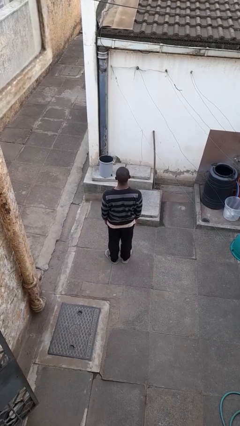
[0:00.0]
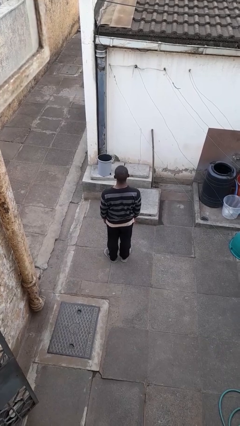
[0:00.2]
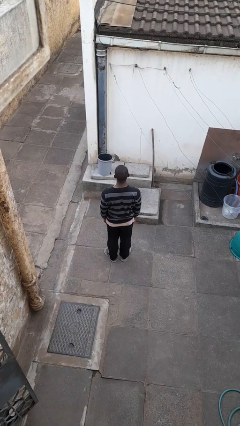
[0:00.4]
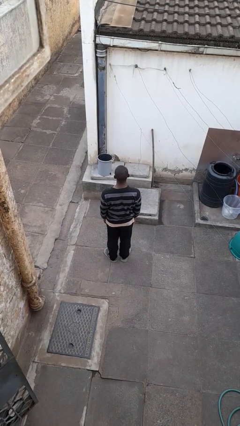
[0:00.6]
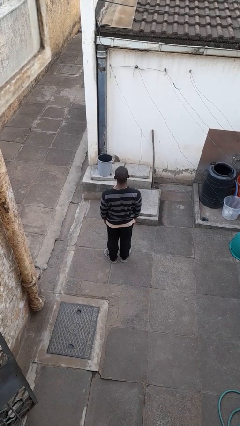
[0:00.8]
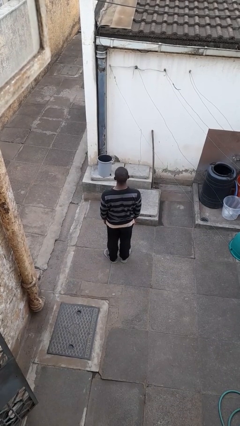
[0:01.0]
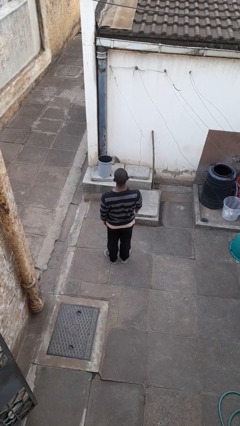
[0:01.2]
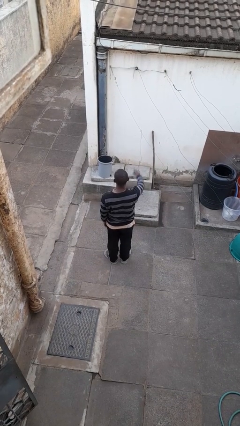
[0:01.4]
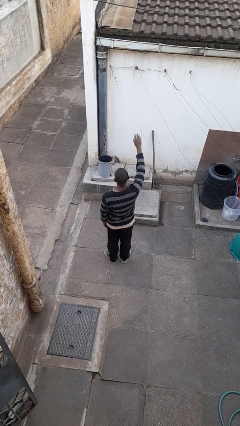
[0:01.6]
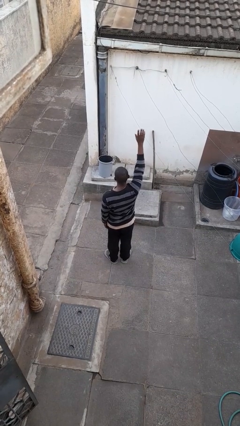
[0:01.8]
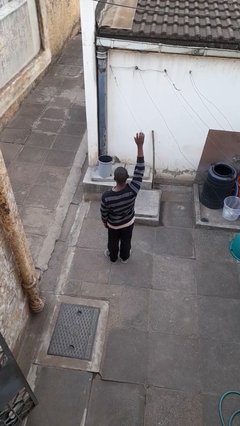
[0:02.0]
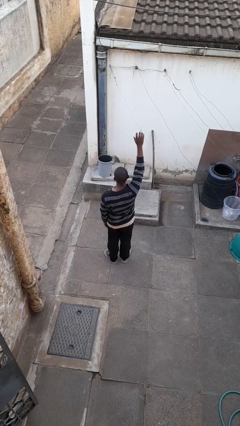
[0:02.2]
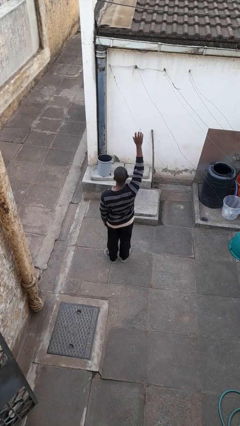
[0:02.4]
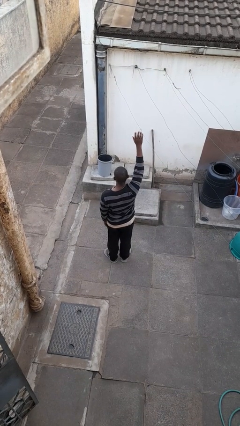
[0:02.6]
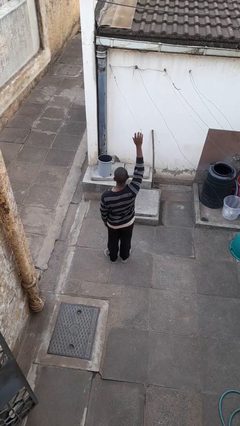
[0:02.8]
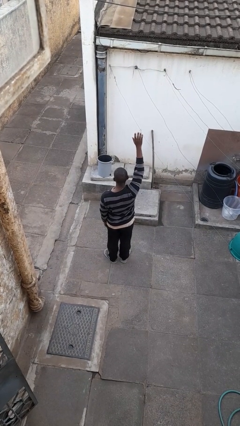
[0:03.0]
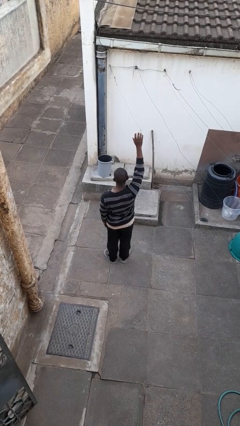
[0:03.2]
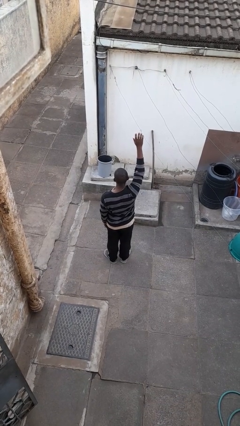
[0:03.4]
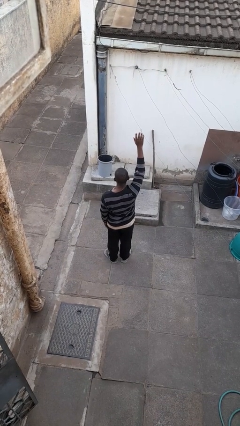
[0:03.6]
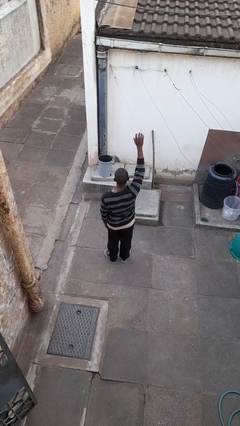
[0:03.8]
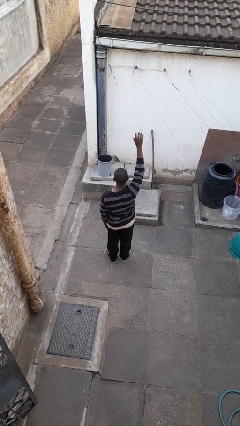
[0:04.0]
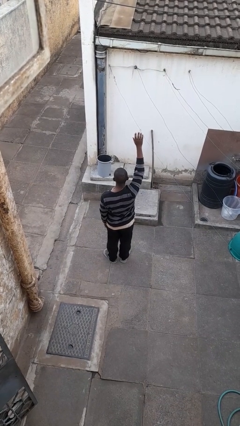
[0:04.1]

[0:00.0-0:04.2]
person gestures raise hand

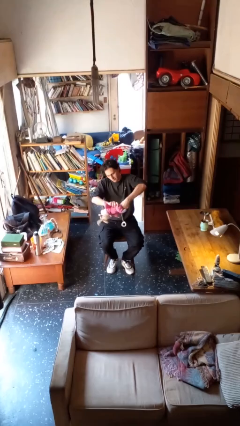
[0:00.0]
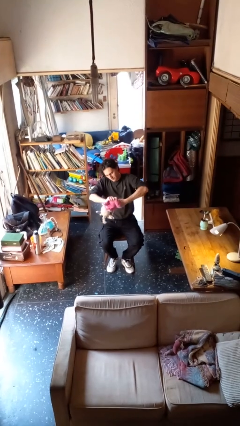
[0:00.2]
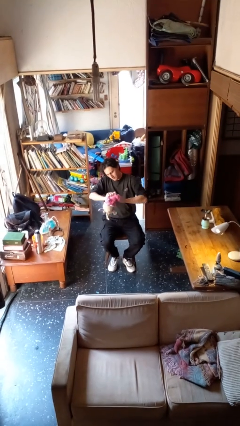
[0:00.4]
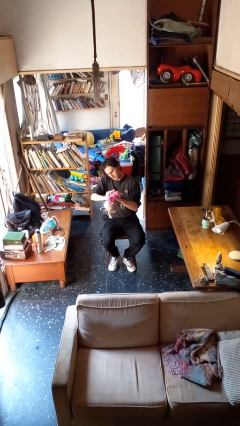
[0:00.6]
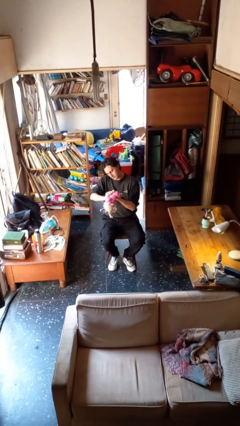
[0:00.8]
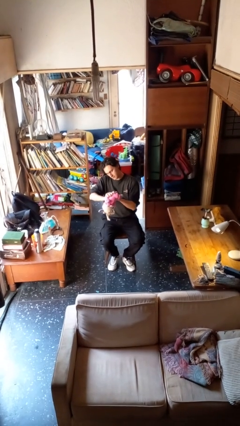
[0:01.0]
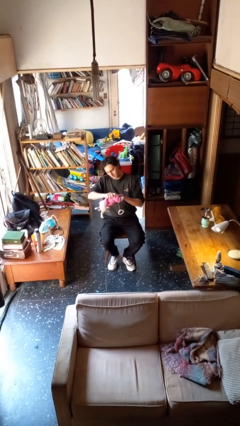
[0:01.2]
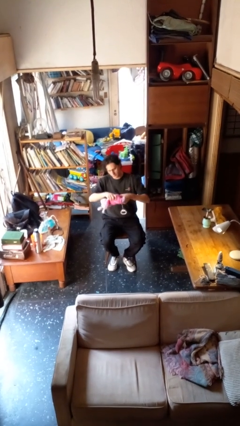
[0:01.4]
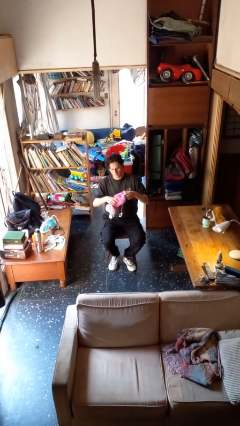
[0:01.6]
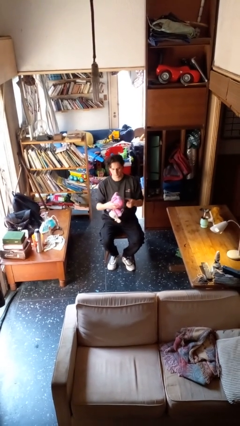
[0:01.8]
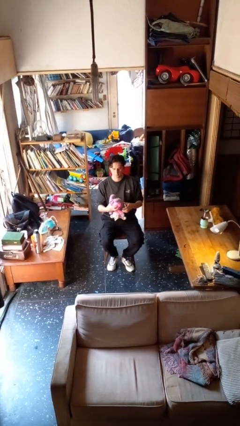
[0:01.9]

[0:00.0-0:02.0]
person squeezes object

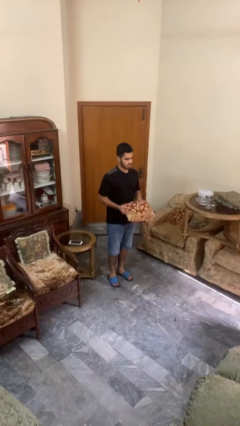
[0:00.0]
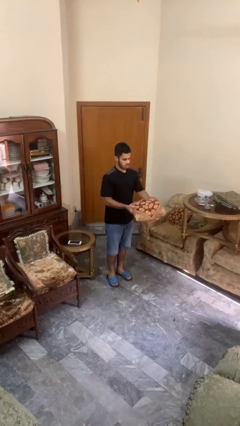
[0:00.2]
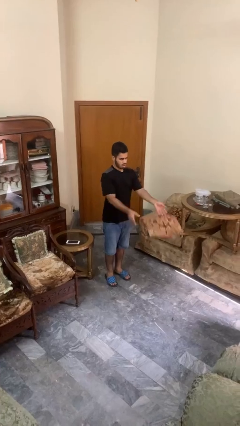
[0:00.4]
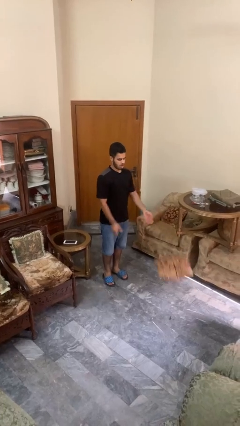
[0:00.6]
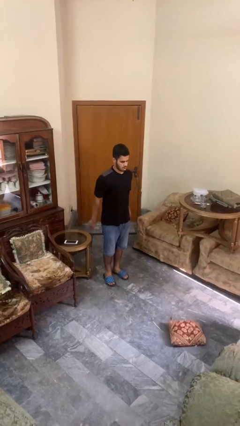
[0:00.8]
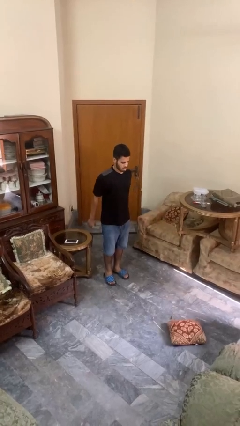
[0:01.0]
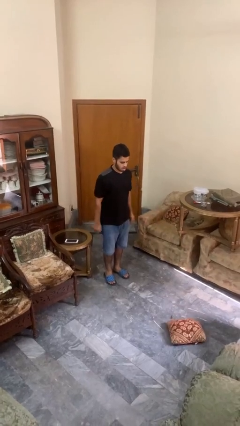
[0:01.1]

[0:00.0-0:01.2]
person throws object to ground

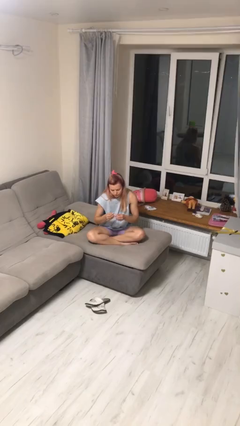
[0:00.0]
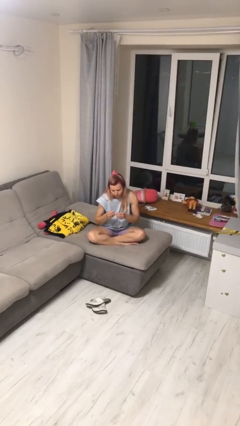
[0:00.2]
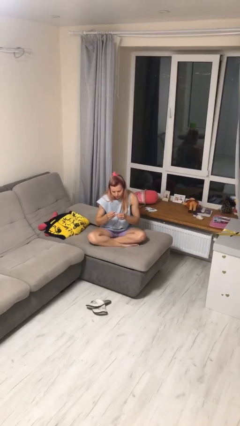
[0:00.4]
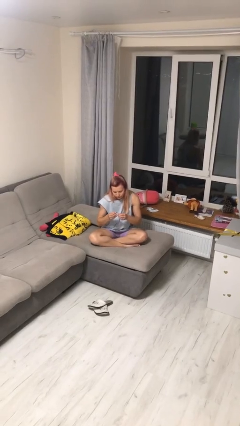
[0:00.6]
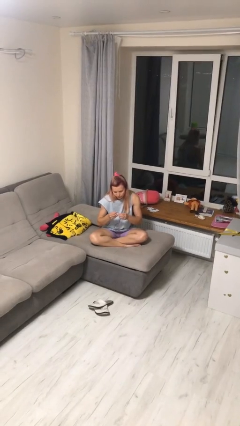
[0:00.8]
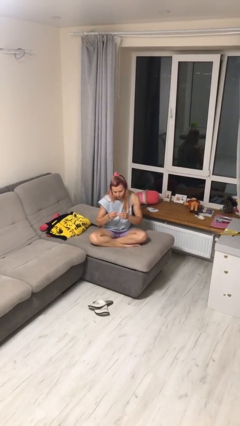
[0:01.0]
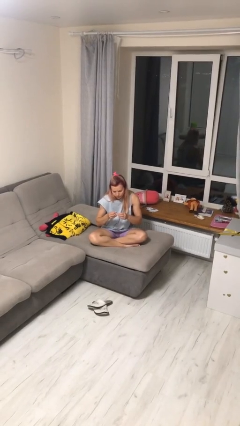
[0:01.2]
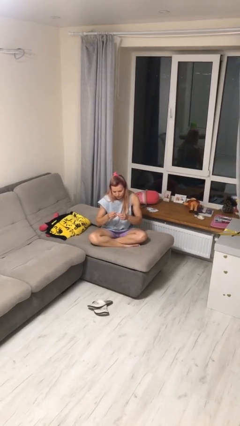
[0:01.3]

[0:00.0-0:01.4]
person clips fingernails

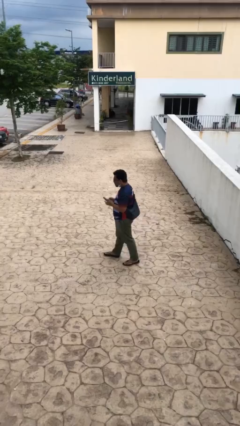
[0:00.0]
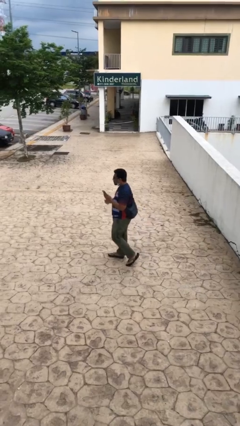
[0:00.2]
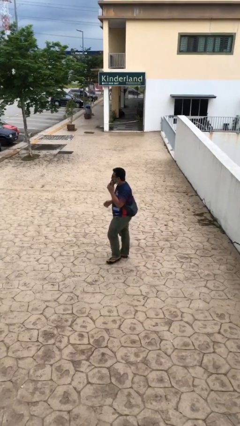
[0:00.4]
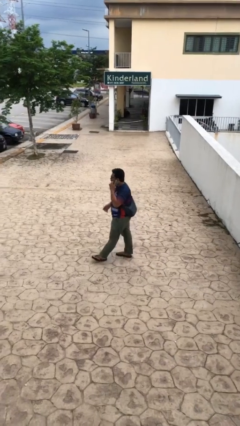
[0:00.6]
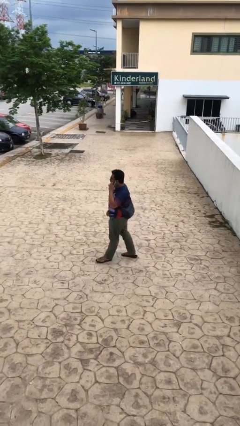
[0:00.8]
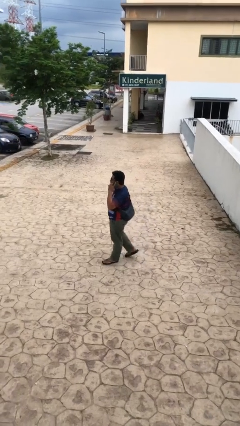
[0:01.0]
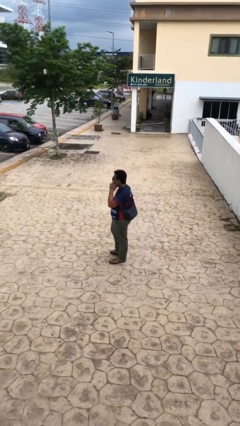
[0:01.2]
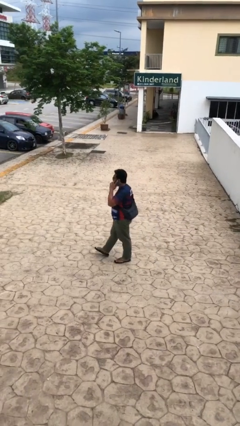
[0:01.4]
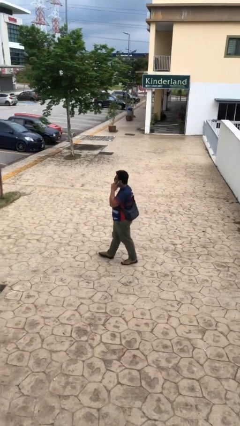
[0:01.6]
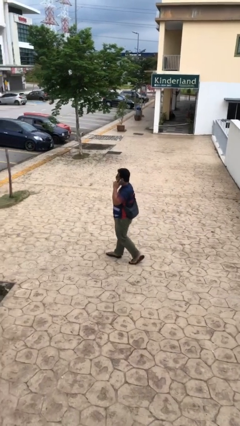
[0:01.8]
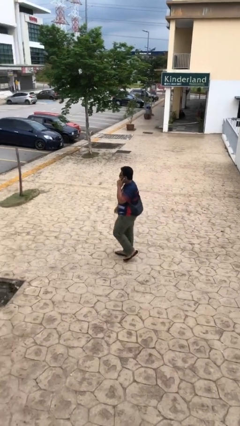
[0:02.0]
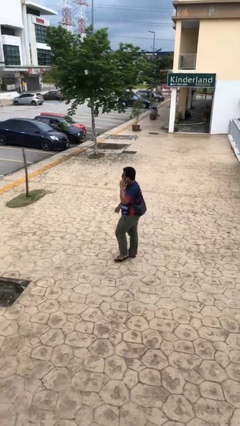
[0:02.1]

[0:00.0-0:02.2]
person talks on phone

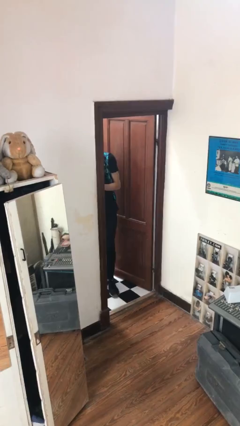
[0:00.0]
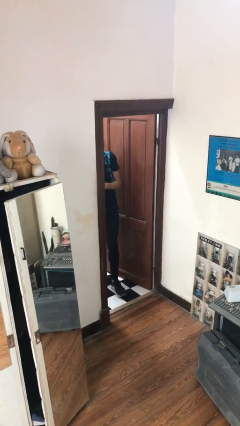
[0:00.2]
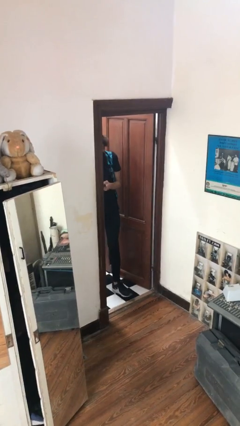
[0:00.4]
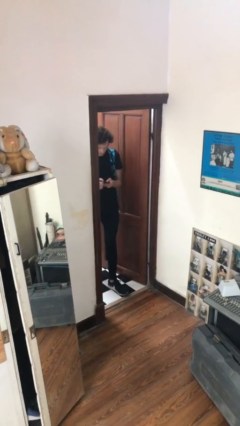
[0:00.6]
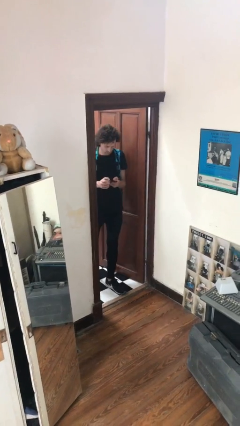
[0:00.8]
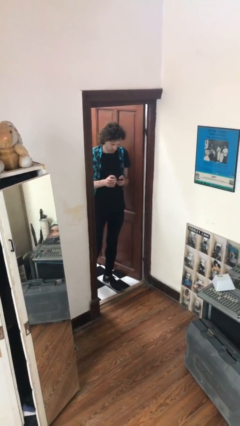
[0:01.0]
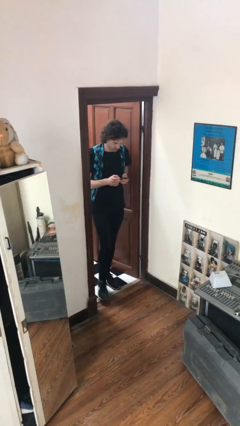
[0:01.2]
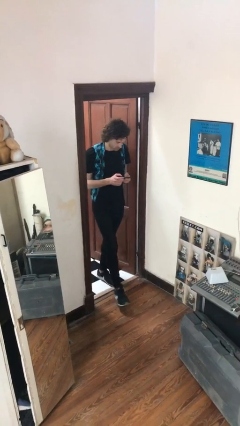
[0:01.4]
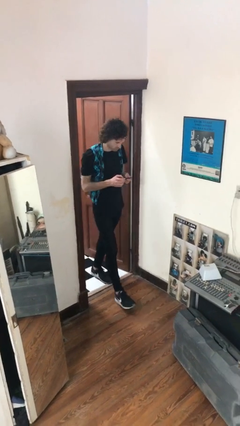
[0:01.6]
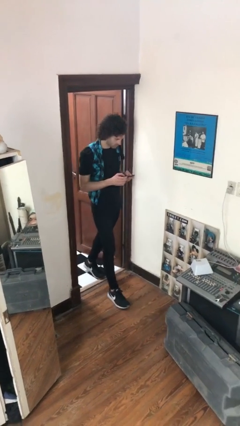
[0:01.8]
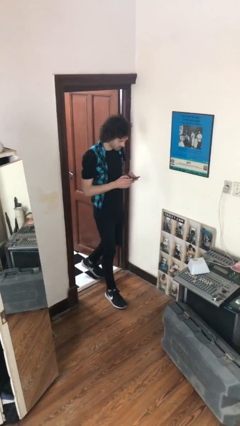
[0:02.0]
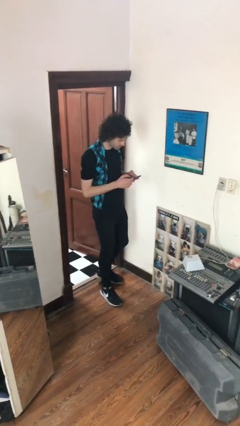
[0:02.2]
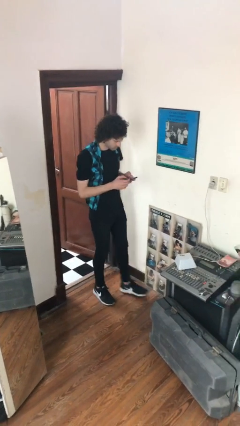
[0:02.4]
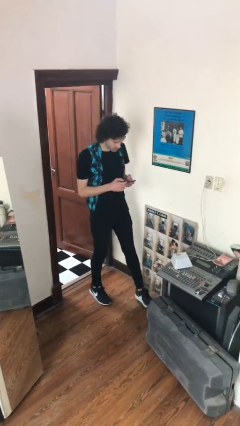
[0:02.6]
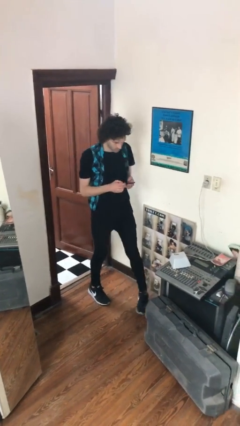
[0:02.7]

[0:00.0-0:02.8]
person enters scene through structure

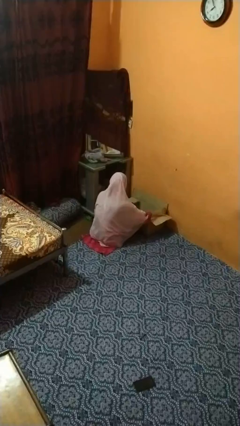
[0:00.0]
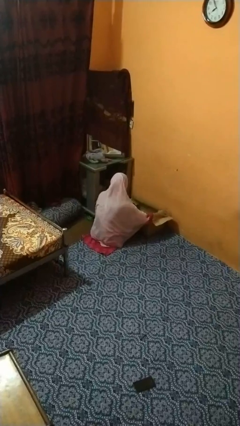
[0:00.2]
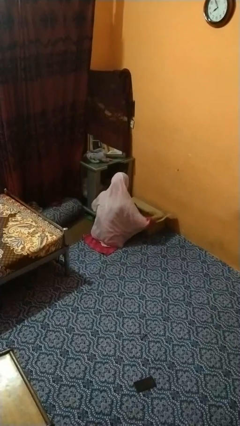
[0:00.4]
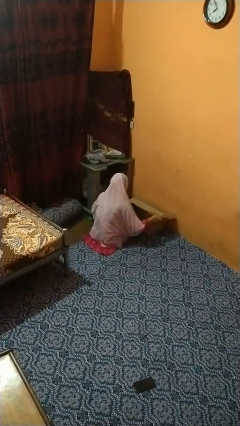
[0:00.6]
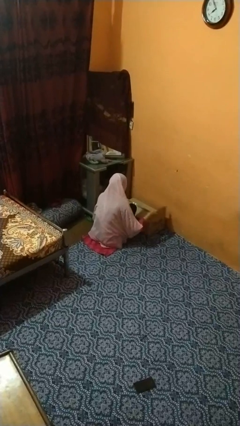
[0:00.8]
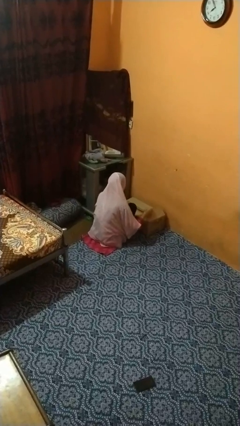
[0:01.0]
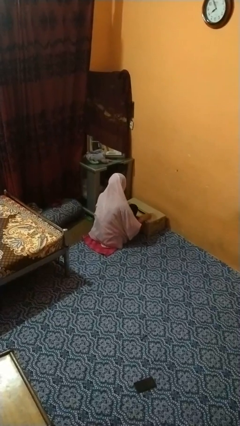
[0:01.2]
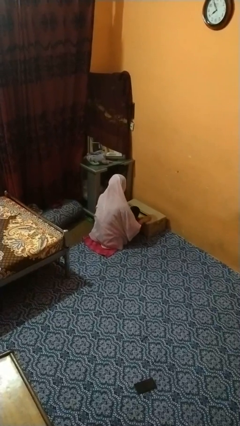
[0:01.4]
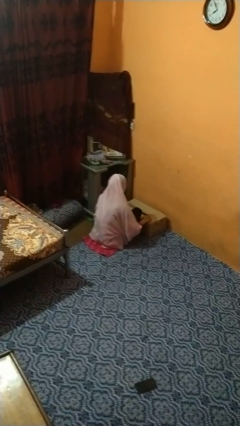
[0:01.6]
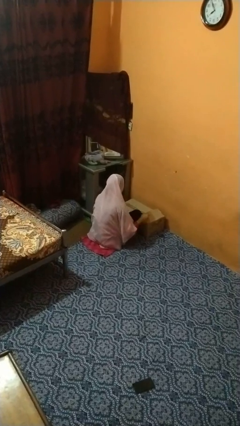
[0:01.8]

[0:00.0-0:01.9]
person closes box

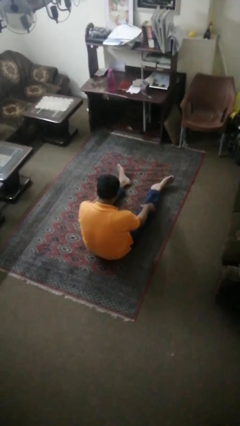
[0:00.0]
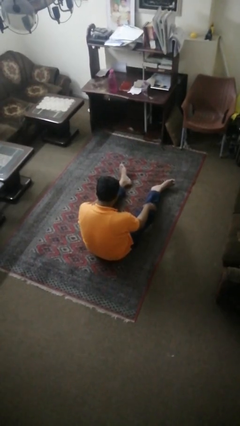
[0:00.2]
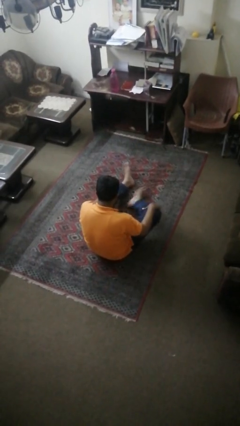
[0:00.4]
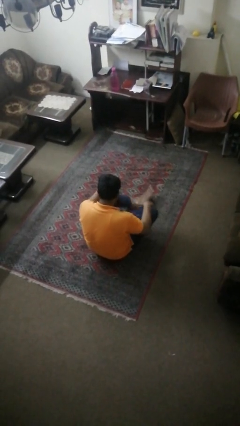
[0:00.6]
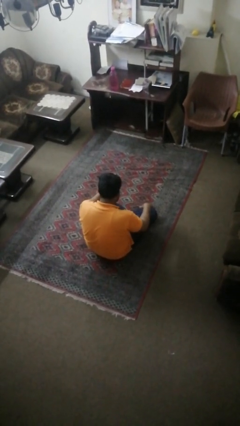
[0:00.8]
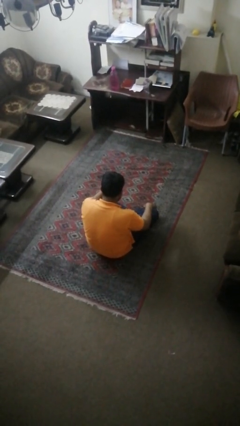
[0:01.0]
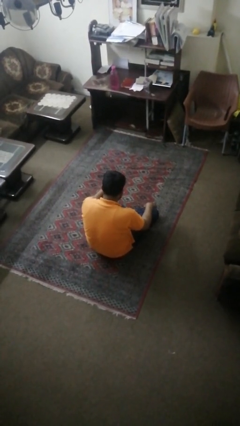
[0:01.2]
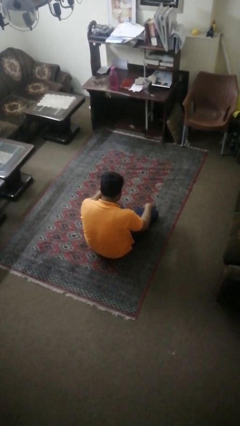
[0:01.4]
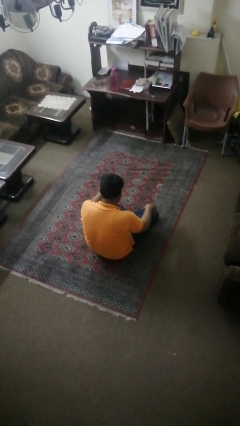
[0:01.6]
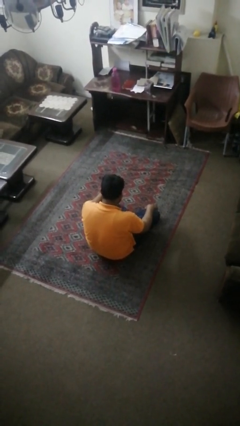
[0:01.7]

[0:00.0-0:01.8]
person crosses legs
